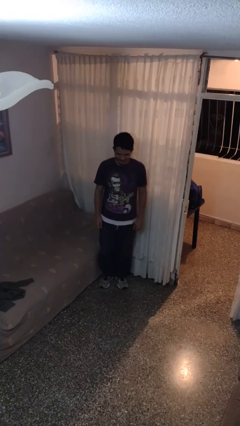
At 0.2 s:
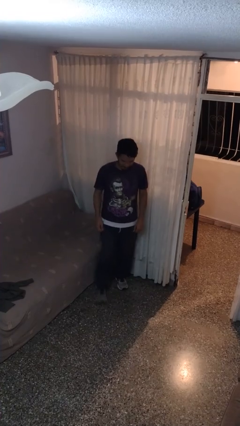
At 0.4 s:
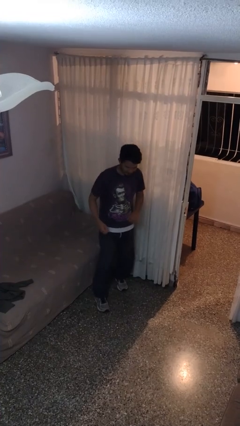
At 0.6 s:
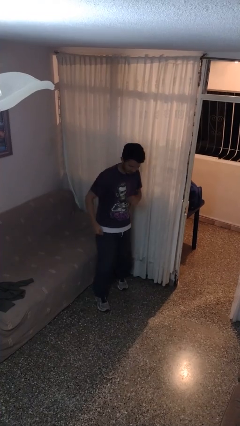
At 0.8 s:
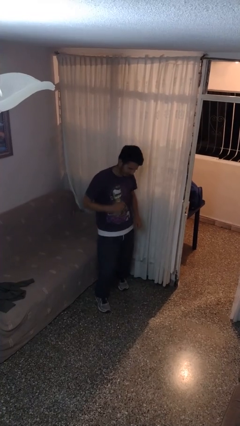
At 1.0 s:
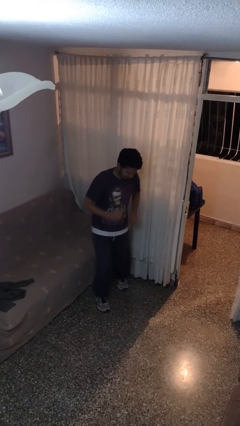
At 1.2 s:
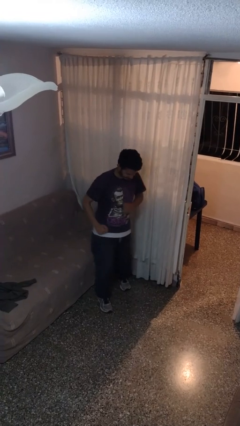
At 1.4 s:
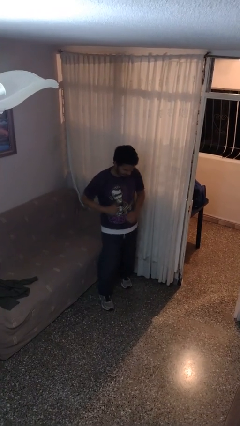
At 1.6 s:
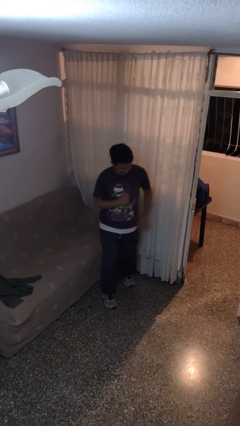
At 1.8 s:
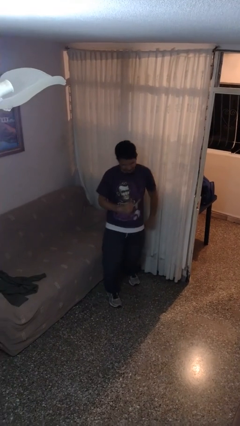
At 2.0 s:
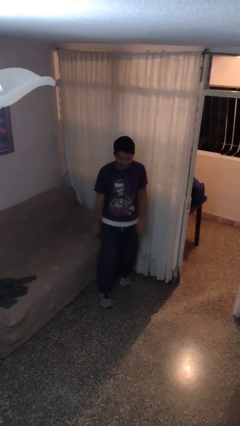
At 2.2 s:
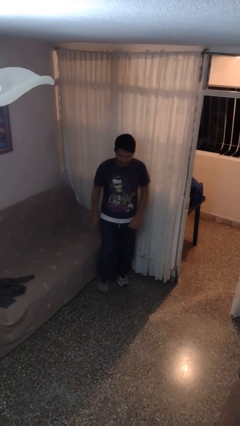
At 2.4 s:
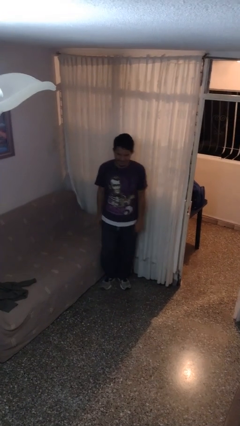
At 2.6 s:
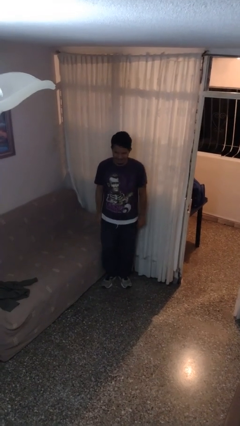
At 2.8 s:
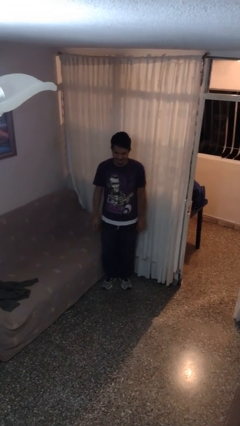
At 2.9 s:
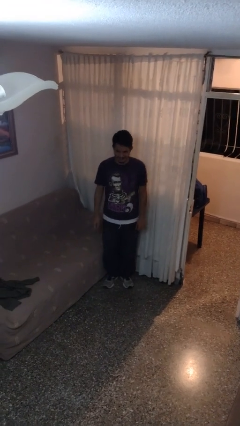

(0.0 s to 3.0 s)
person dances in place

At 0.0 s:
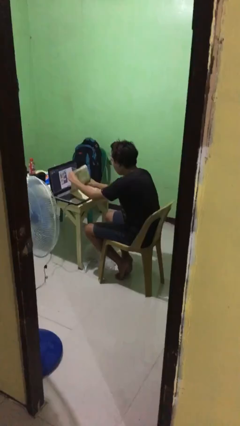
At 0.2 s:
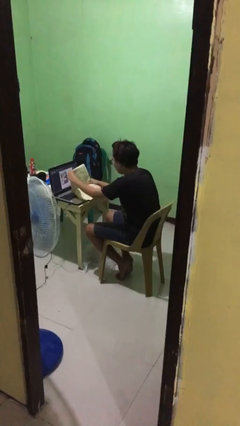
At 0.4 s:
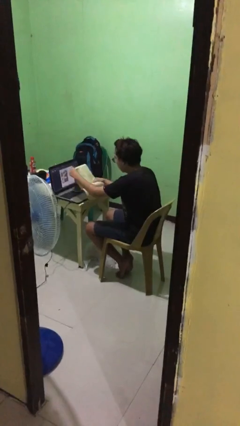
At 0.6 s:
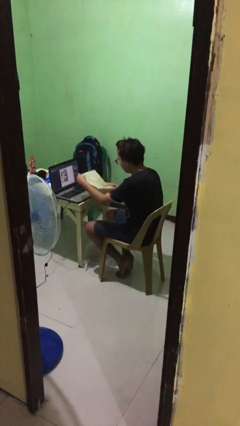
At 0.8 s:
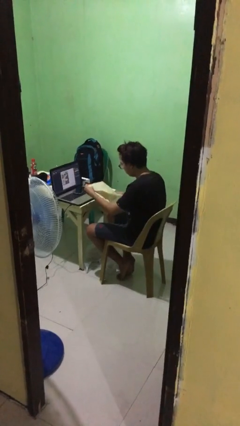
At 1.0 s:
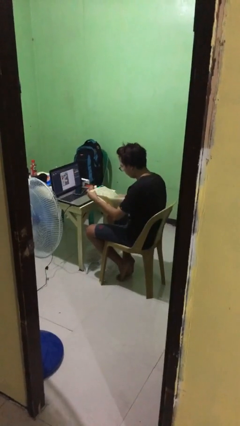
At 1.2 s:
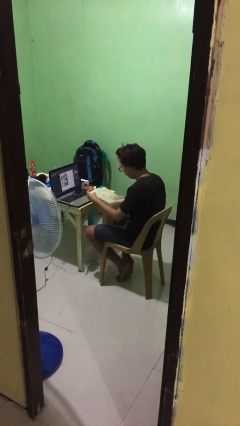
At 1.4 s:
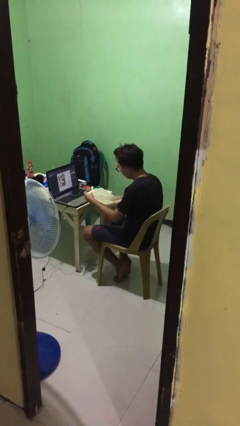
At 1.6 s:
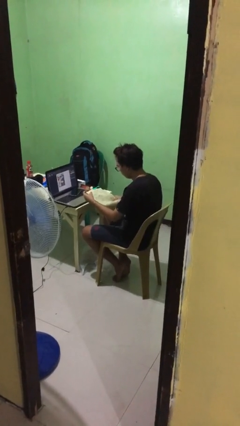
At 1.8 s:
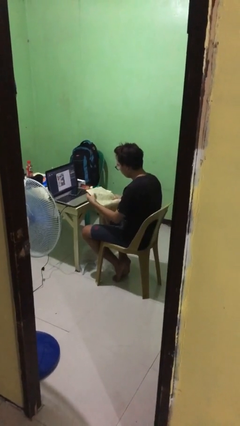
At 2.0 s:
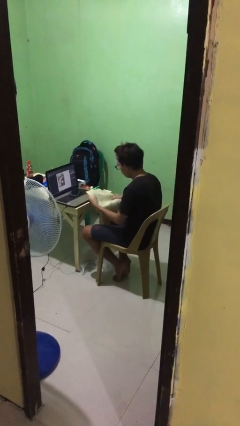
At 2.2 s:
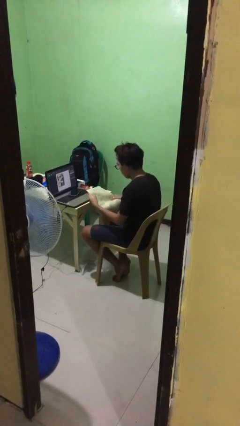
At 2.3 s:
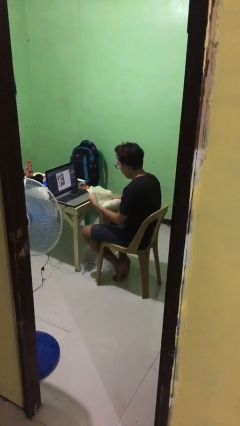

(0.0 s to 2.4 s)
person reads document

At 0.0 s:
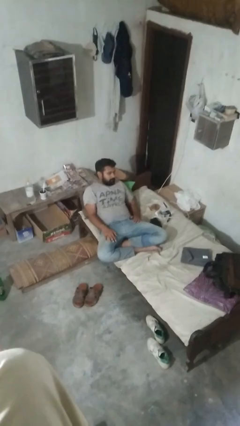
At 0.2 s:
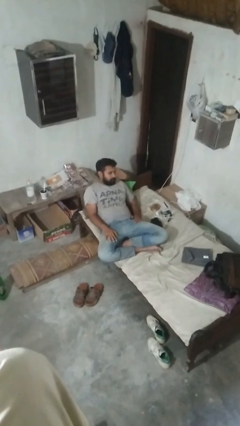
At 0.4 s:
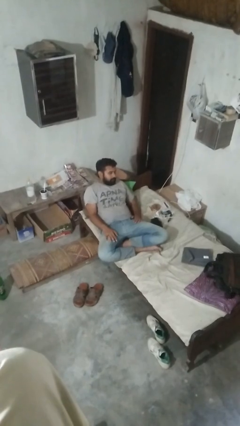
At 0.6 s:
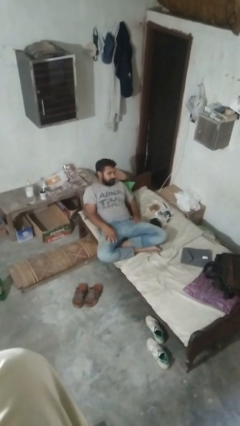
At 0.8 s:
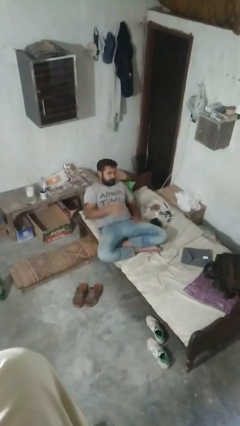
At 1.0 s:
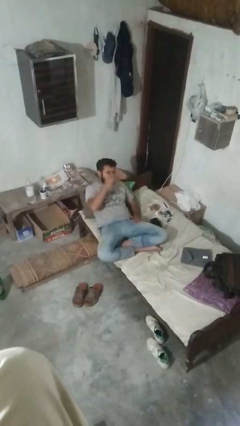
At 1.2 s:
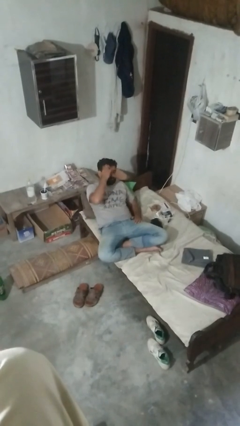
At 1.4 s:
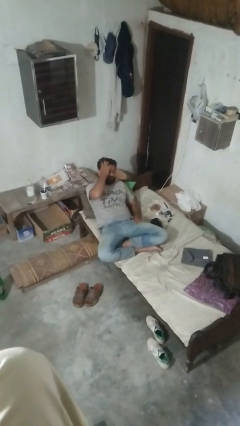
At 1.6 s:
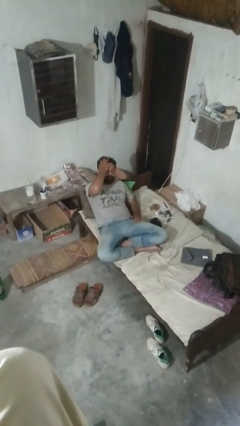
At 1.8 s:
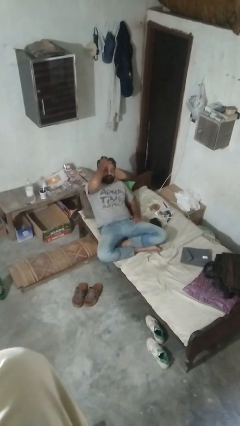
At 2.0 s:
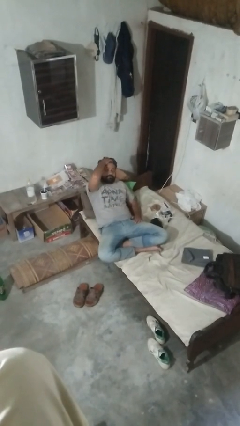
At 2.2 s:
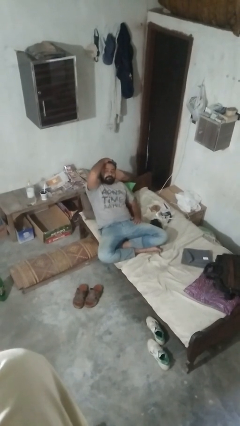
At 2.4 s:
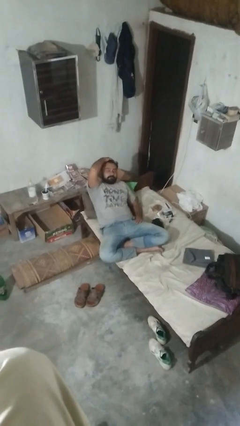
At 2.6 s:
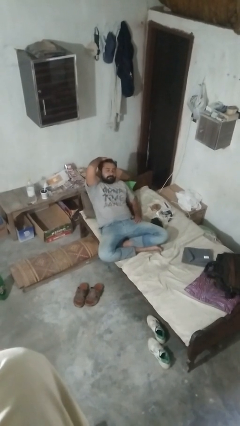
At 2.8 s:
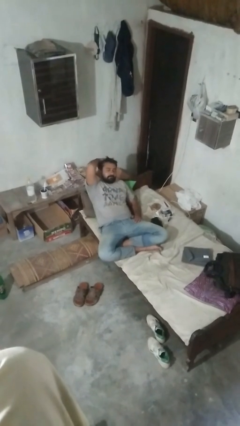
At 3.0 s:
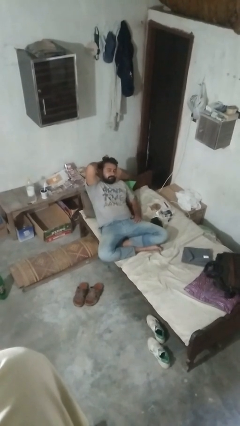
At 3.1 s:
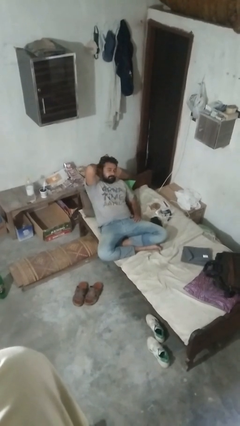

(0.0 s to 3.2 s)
person strokes hair

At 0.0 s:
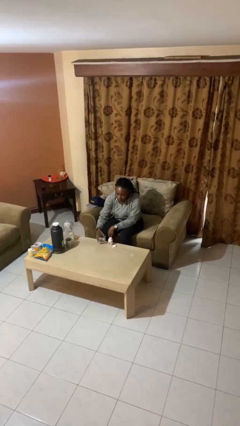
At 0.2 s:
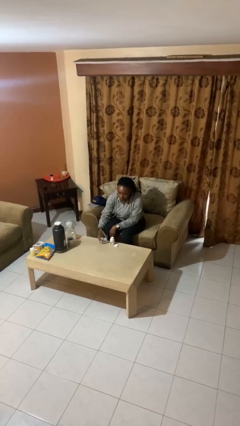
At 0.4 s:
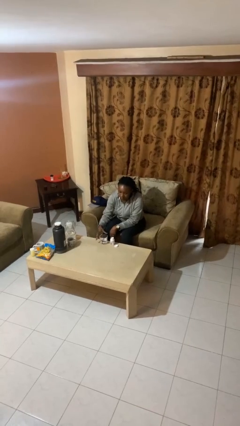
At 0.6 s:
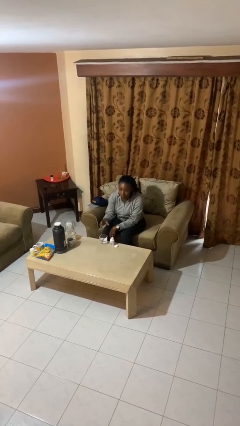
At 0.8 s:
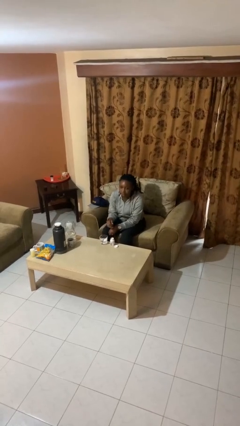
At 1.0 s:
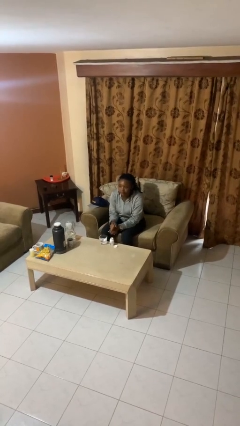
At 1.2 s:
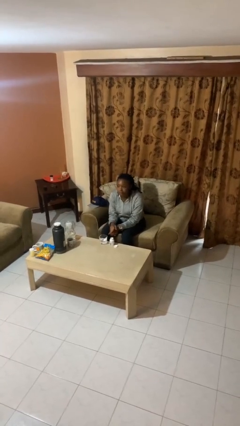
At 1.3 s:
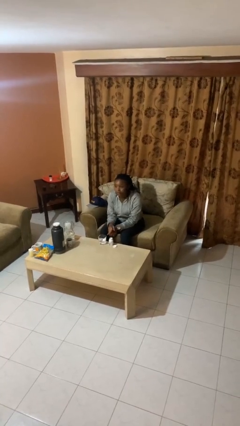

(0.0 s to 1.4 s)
person drinks from cup

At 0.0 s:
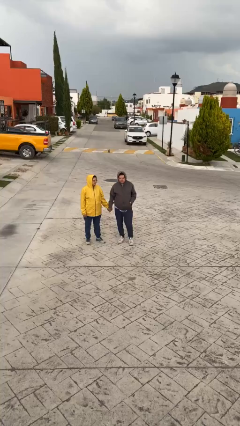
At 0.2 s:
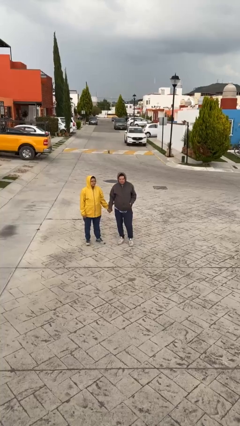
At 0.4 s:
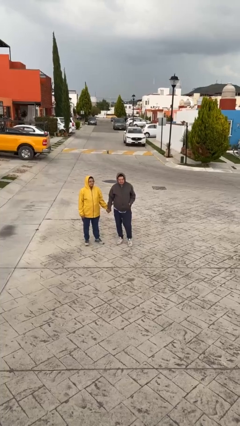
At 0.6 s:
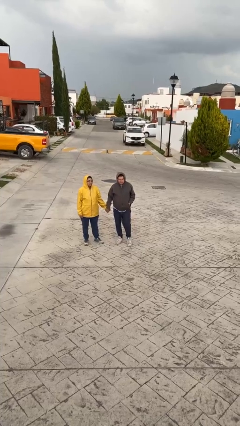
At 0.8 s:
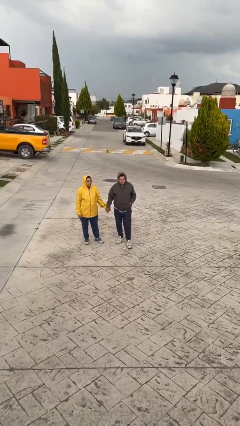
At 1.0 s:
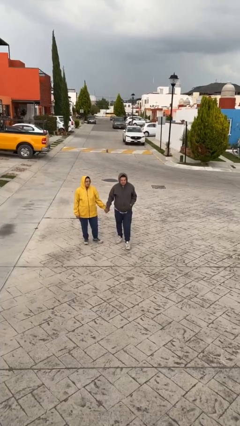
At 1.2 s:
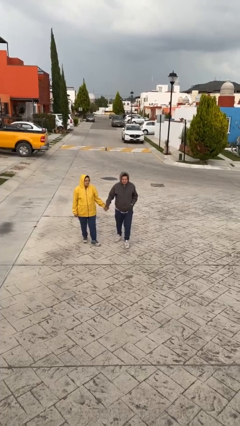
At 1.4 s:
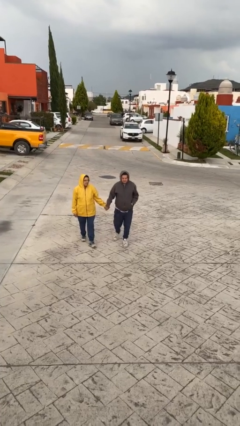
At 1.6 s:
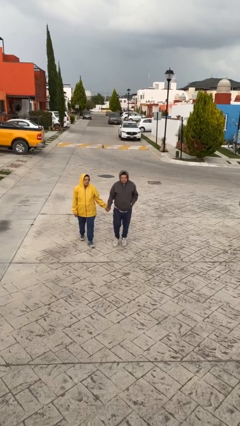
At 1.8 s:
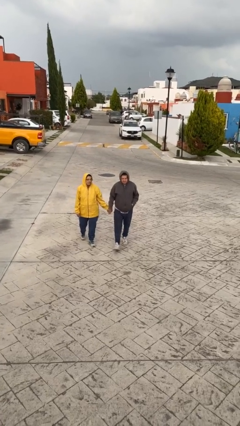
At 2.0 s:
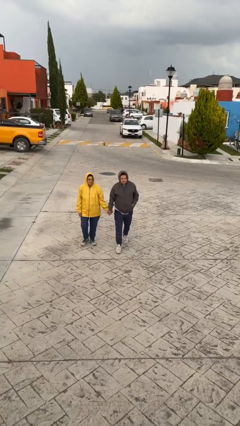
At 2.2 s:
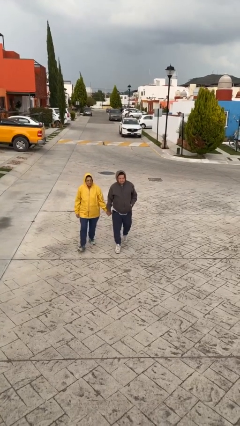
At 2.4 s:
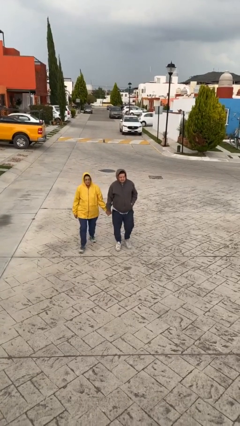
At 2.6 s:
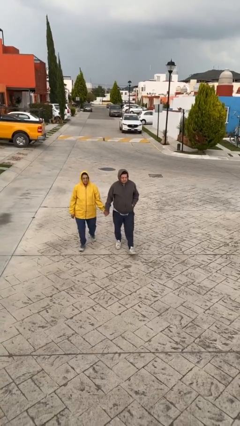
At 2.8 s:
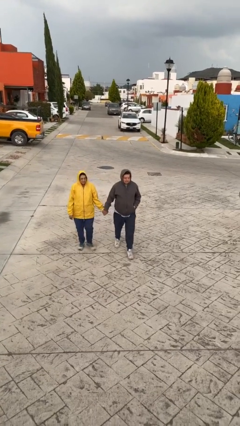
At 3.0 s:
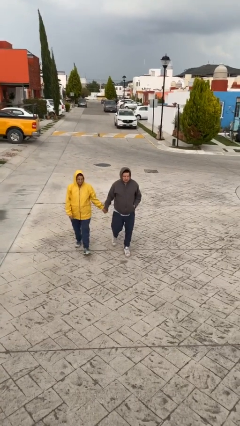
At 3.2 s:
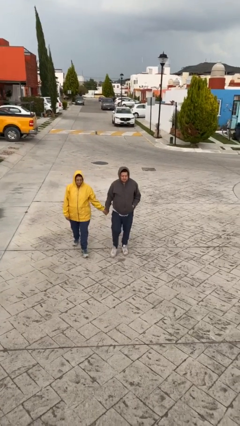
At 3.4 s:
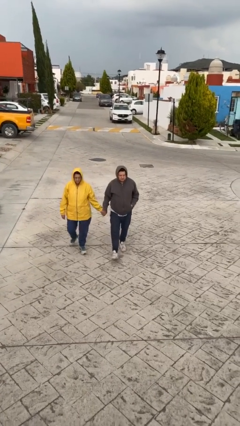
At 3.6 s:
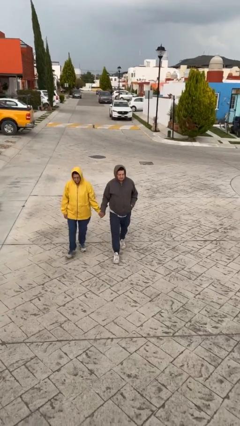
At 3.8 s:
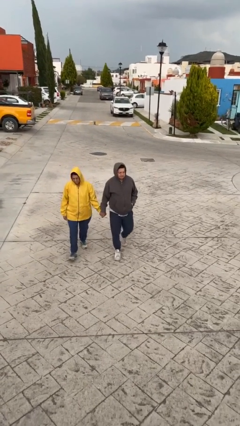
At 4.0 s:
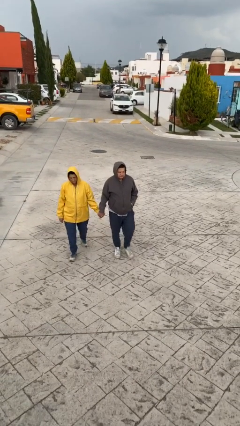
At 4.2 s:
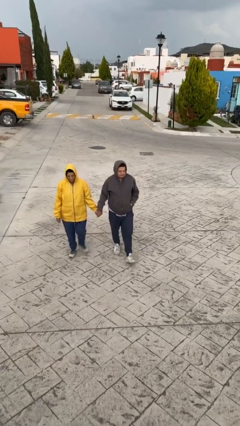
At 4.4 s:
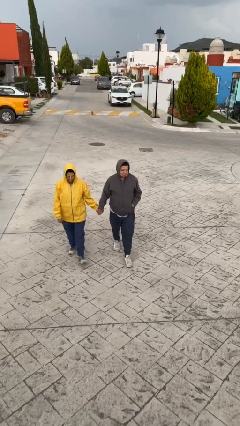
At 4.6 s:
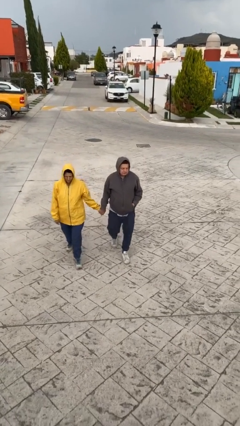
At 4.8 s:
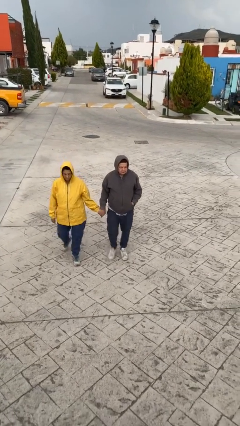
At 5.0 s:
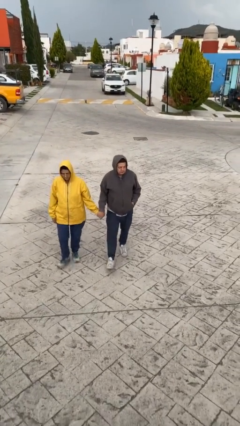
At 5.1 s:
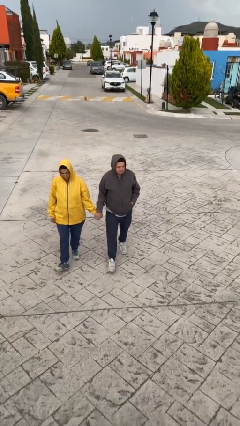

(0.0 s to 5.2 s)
person holds hand

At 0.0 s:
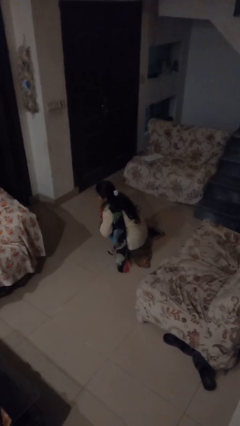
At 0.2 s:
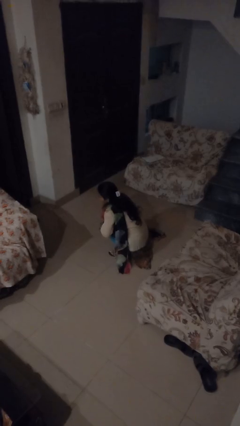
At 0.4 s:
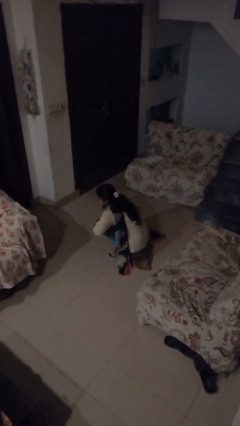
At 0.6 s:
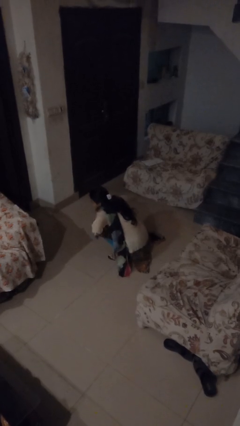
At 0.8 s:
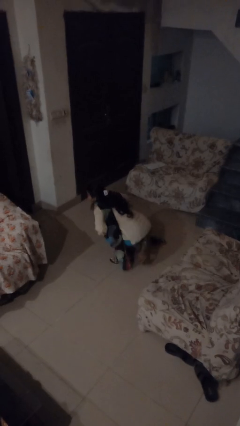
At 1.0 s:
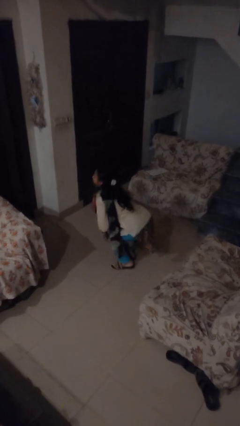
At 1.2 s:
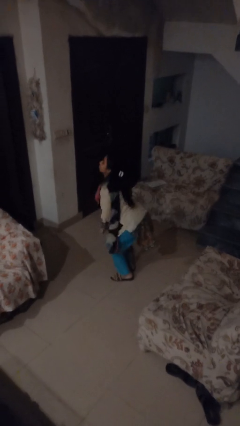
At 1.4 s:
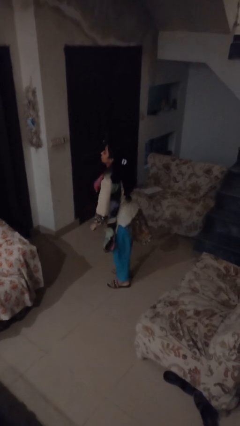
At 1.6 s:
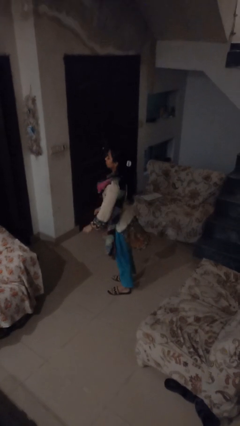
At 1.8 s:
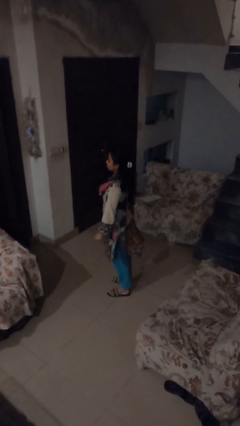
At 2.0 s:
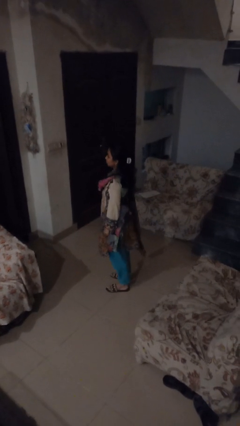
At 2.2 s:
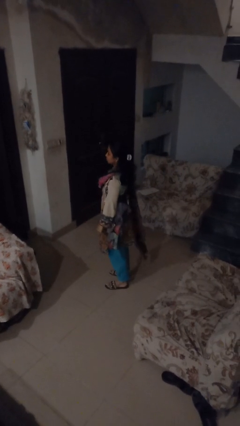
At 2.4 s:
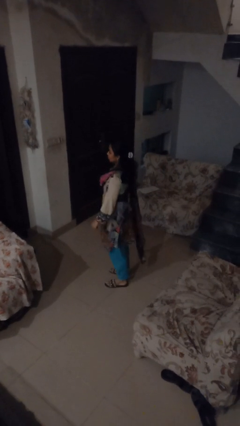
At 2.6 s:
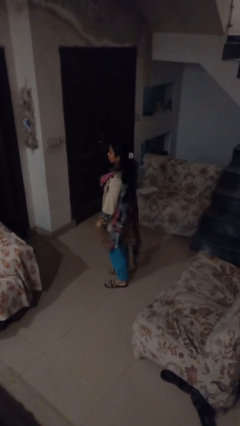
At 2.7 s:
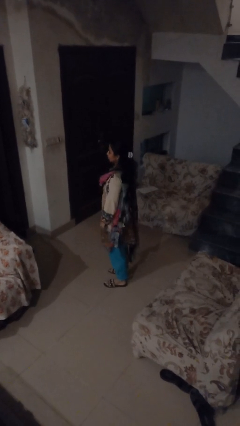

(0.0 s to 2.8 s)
person stands up
